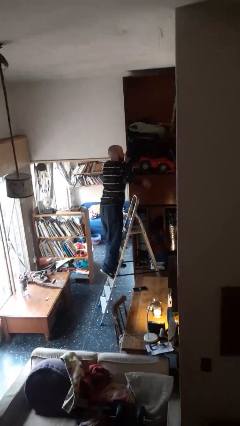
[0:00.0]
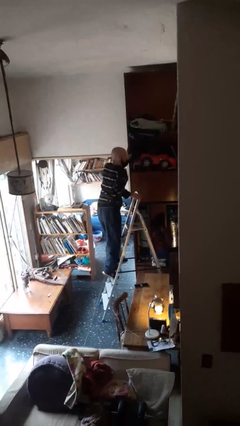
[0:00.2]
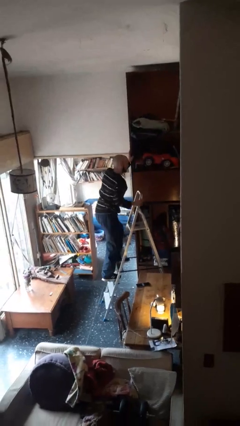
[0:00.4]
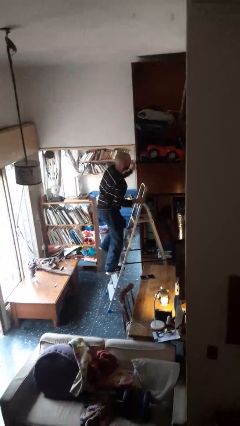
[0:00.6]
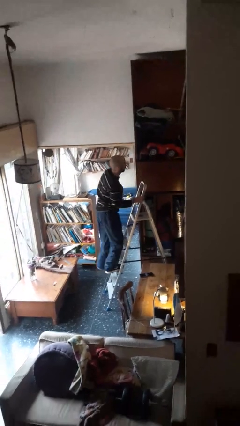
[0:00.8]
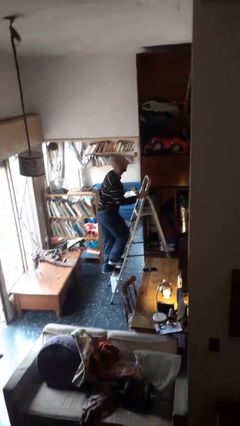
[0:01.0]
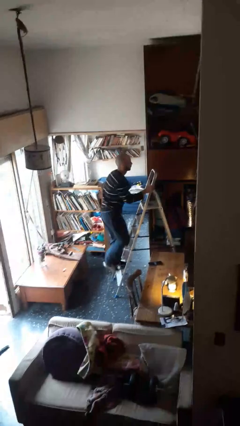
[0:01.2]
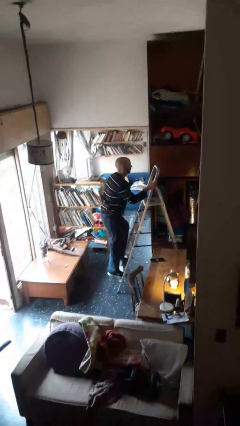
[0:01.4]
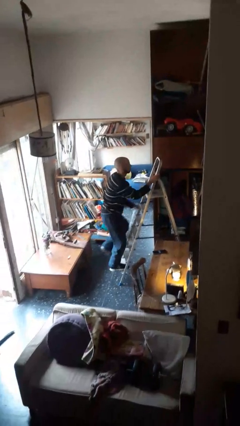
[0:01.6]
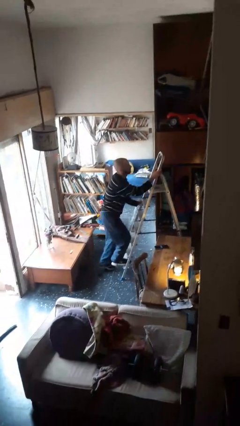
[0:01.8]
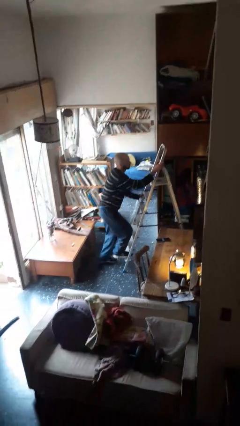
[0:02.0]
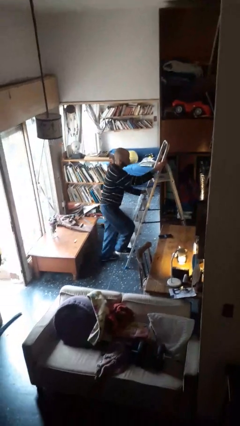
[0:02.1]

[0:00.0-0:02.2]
person climbs down ladder

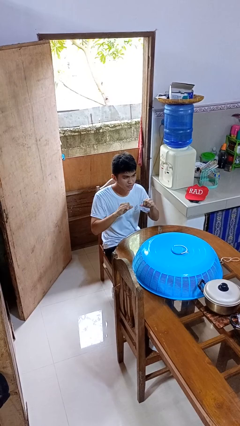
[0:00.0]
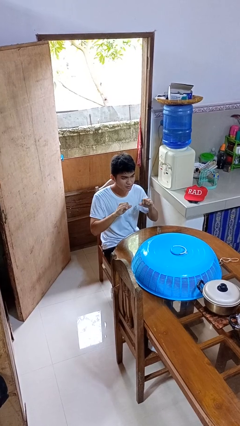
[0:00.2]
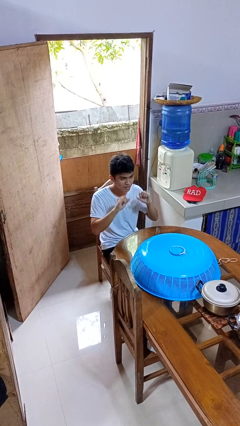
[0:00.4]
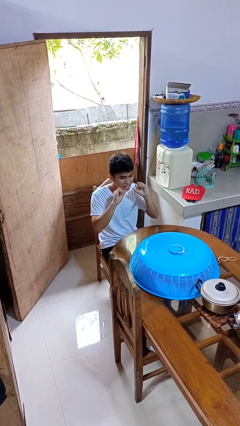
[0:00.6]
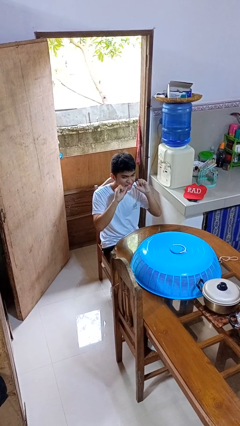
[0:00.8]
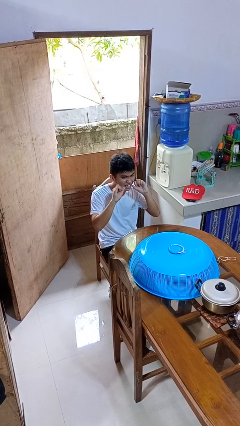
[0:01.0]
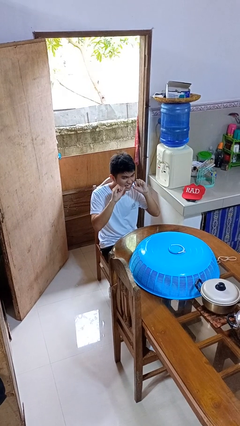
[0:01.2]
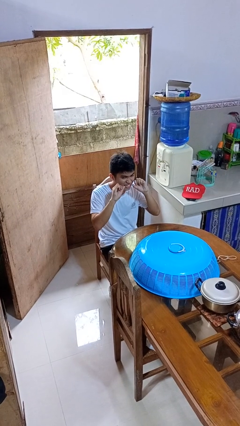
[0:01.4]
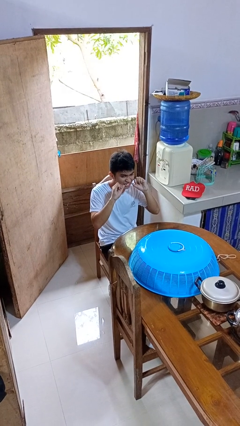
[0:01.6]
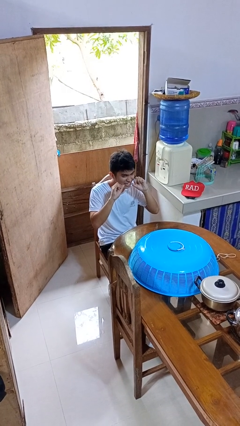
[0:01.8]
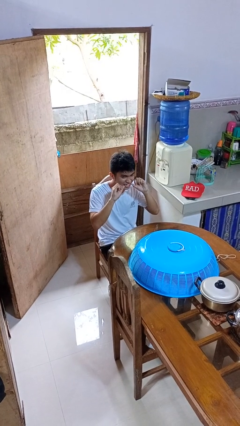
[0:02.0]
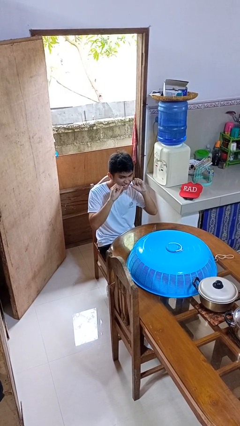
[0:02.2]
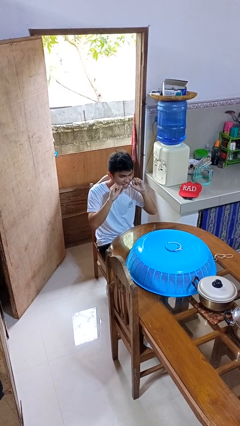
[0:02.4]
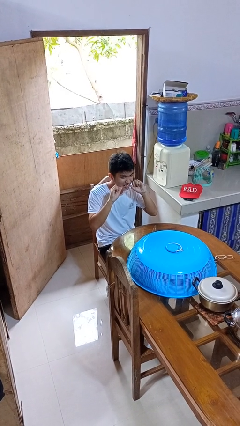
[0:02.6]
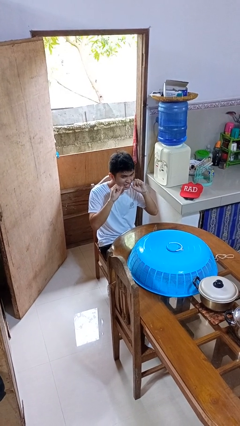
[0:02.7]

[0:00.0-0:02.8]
person flosses

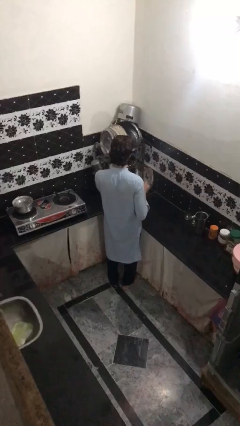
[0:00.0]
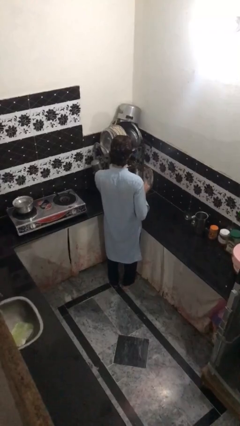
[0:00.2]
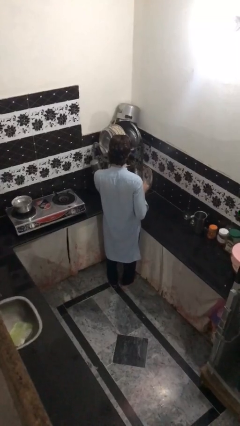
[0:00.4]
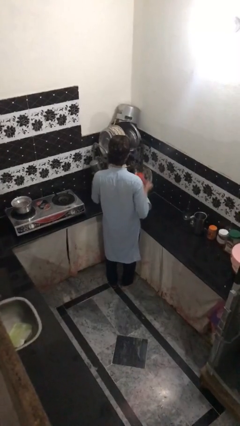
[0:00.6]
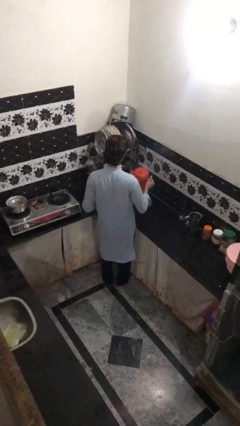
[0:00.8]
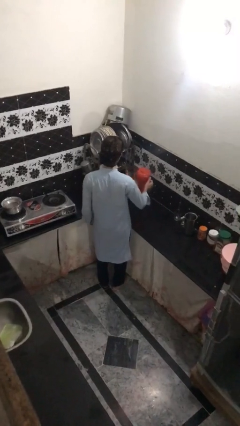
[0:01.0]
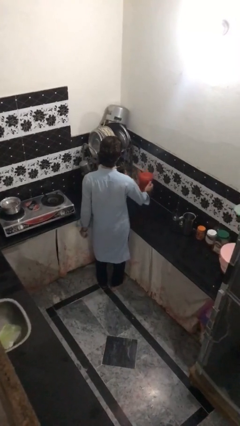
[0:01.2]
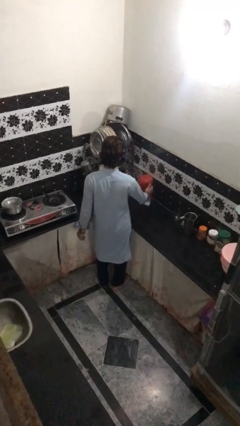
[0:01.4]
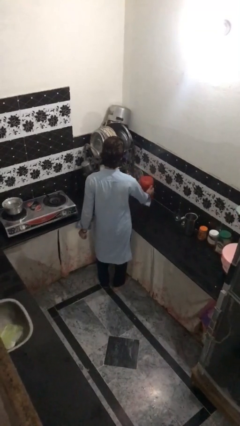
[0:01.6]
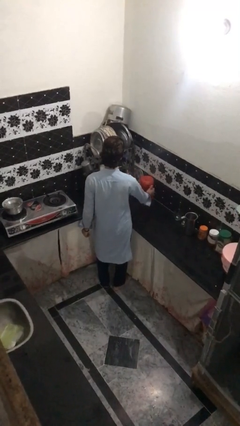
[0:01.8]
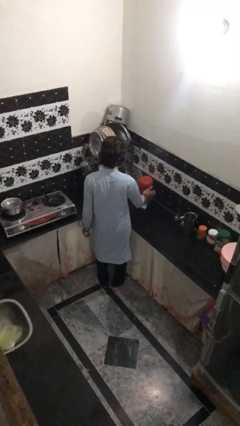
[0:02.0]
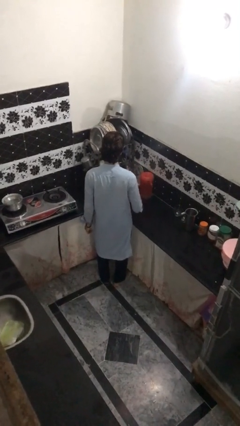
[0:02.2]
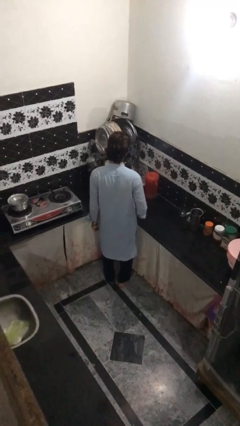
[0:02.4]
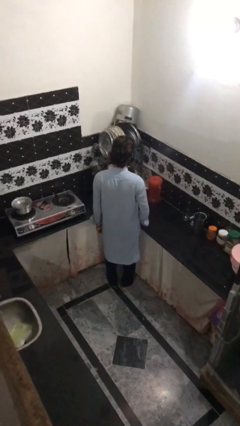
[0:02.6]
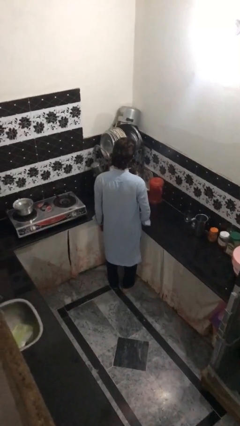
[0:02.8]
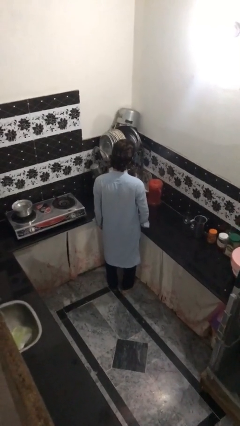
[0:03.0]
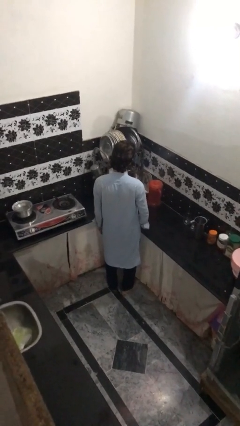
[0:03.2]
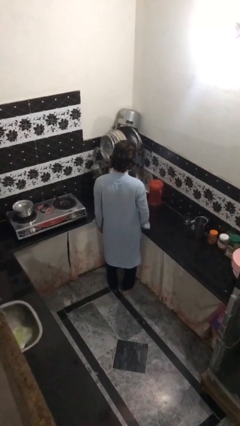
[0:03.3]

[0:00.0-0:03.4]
person puts down object on countertop

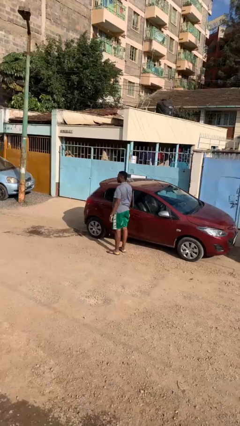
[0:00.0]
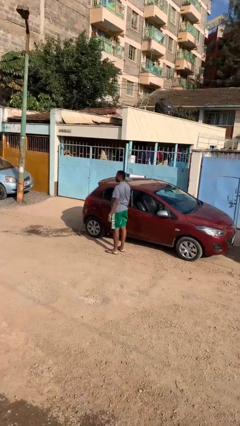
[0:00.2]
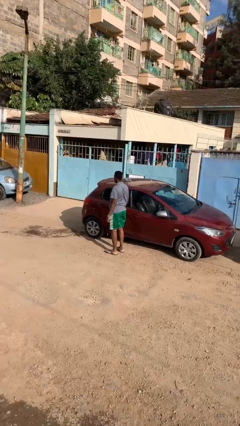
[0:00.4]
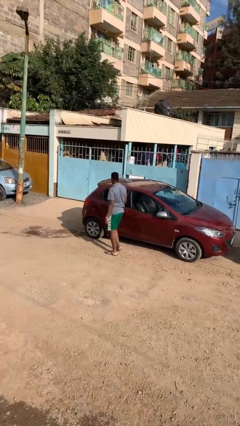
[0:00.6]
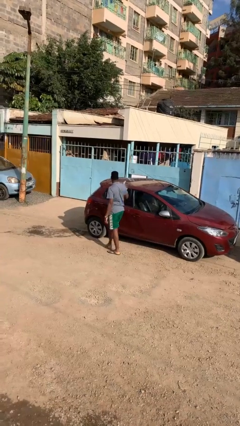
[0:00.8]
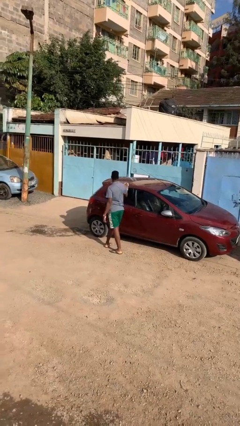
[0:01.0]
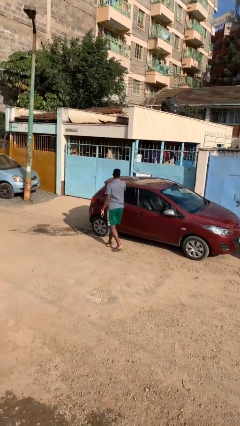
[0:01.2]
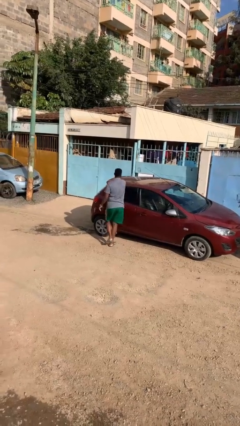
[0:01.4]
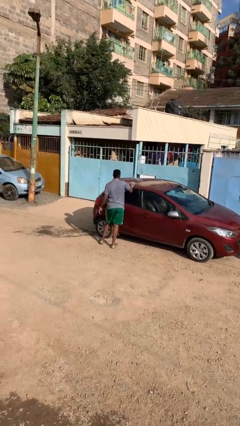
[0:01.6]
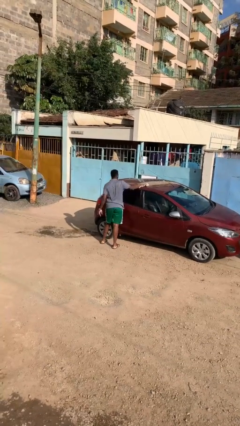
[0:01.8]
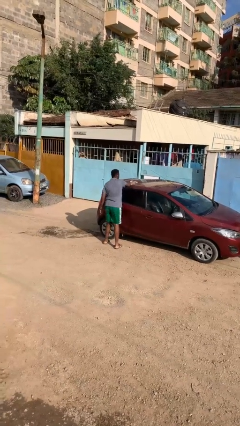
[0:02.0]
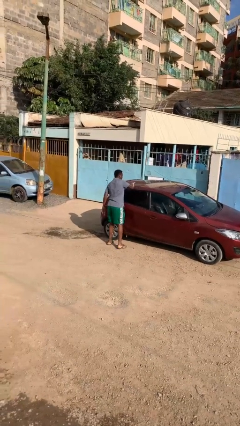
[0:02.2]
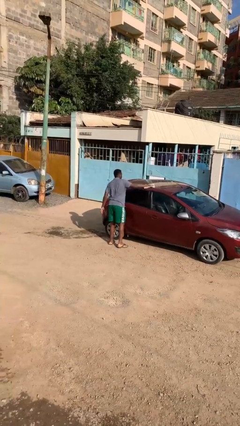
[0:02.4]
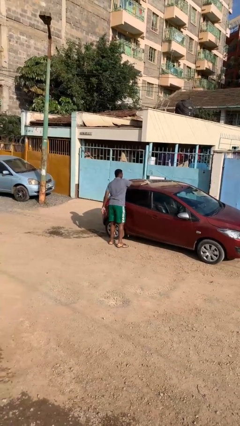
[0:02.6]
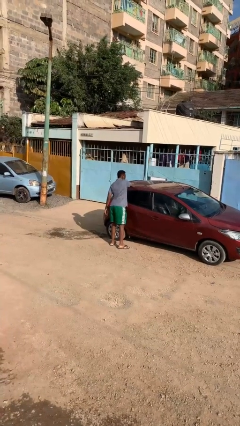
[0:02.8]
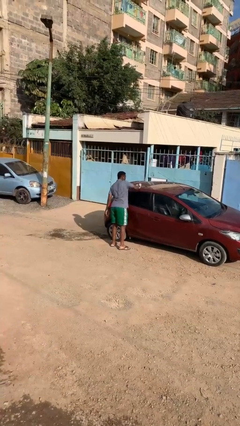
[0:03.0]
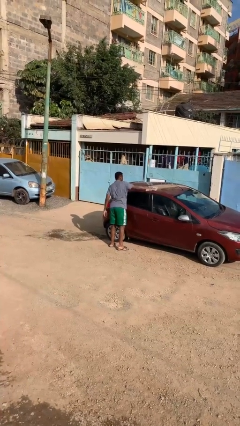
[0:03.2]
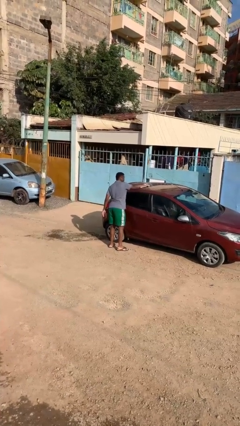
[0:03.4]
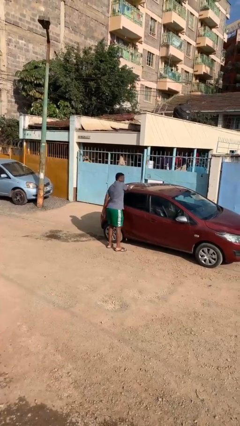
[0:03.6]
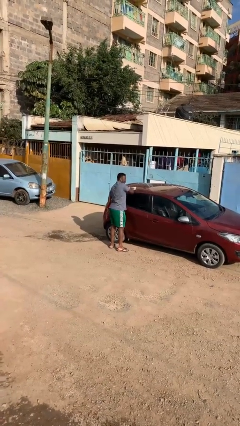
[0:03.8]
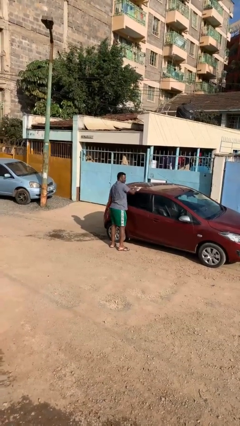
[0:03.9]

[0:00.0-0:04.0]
person polishes car with rag

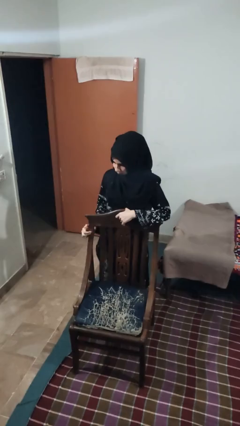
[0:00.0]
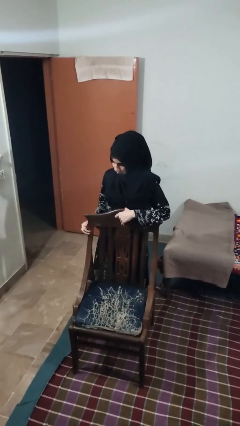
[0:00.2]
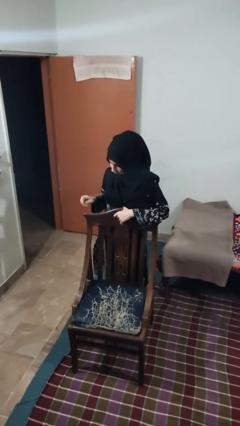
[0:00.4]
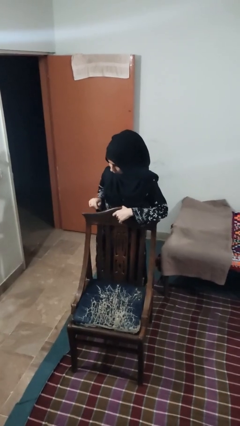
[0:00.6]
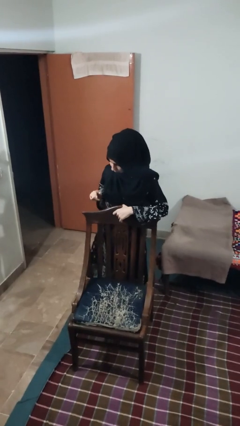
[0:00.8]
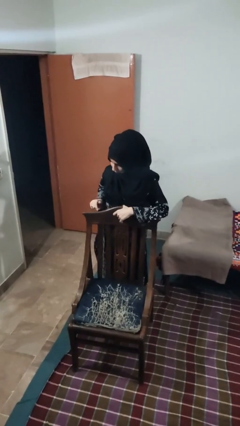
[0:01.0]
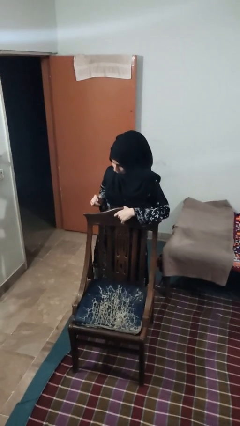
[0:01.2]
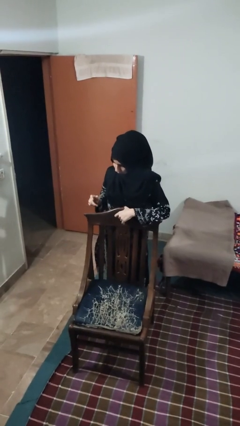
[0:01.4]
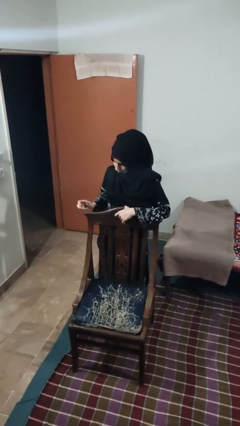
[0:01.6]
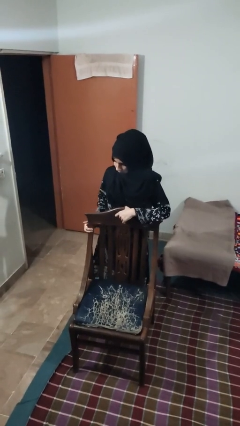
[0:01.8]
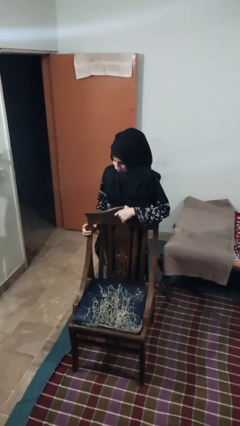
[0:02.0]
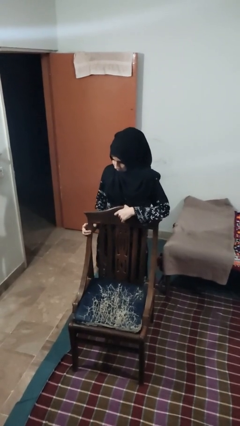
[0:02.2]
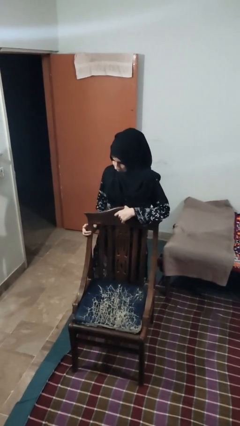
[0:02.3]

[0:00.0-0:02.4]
person taps object with finger

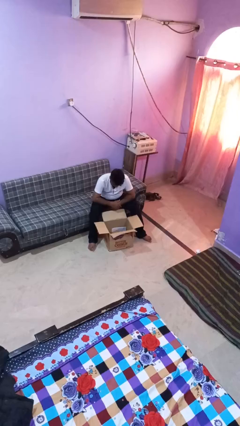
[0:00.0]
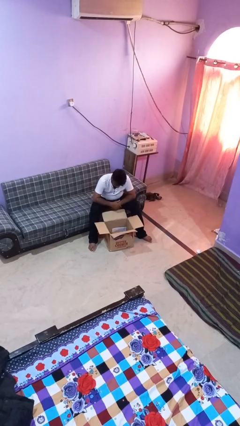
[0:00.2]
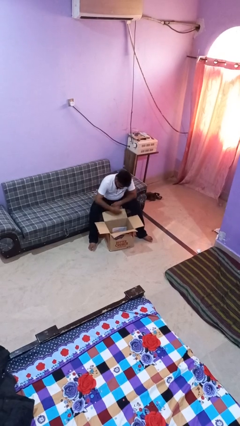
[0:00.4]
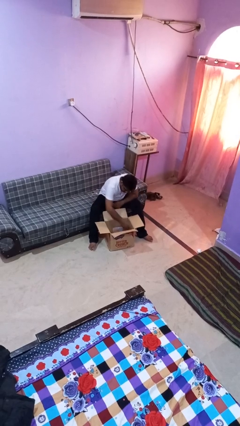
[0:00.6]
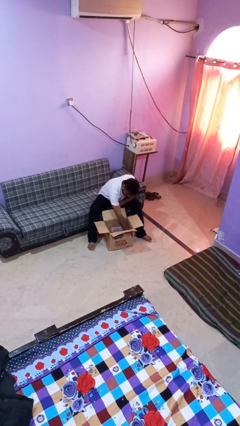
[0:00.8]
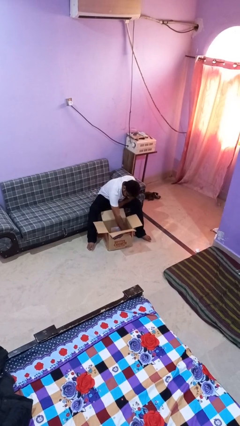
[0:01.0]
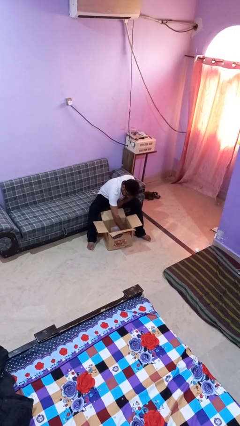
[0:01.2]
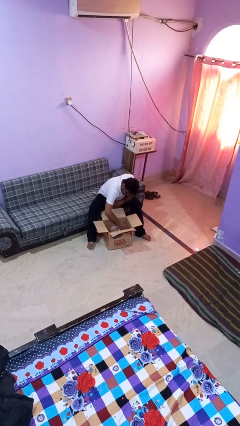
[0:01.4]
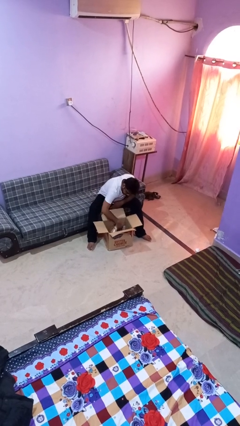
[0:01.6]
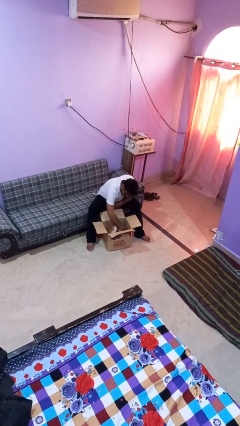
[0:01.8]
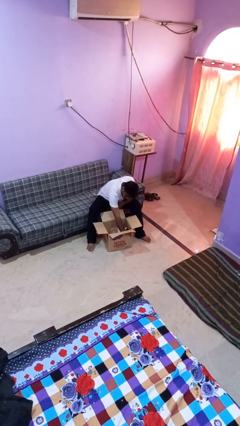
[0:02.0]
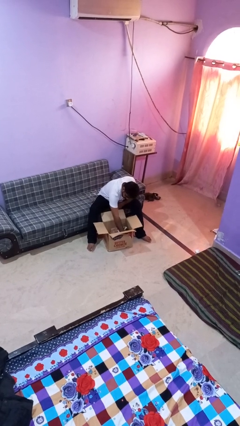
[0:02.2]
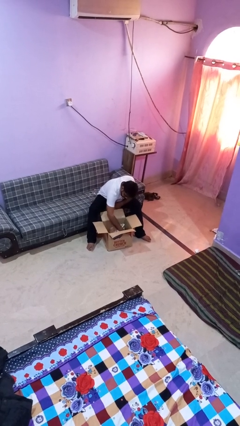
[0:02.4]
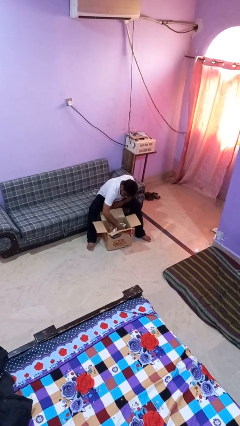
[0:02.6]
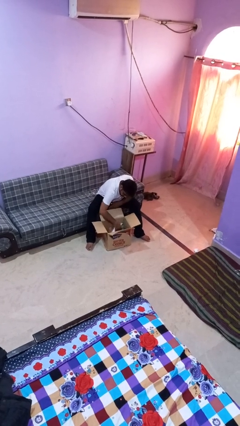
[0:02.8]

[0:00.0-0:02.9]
person searches in box
